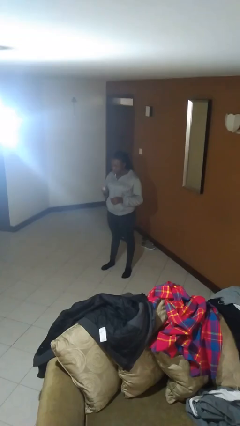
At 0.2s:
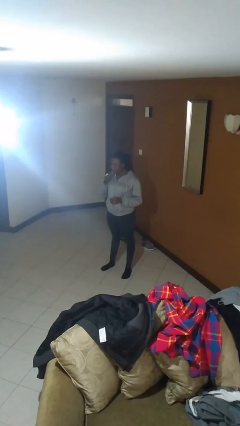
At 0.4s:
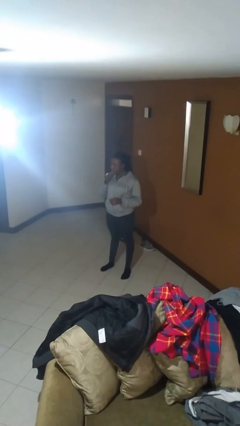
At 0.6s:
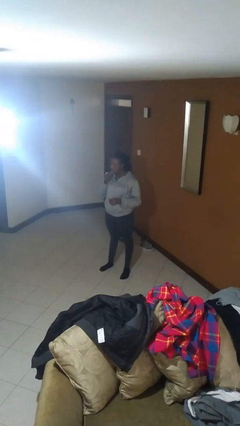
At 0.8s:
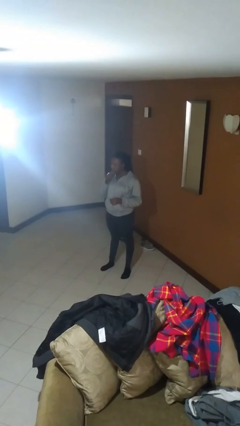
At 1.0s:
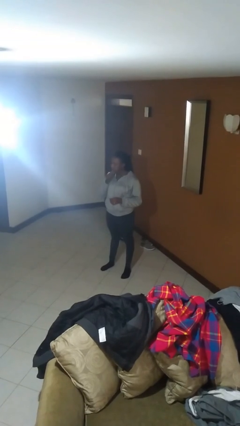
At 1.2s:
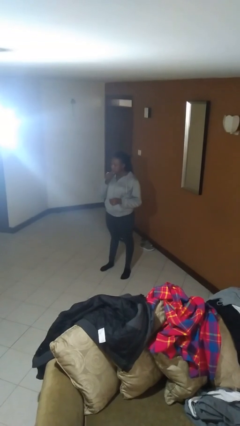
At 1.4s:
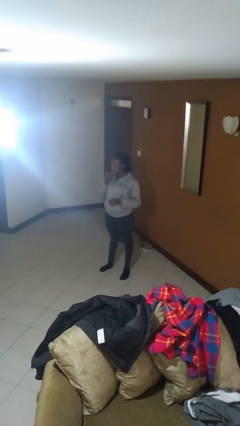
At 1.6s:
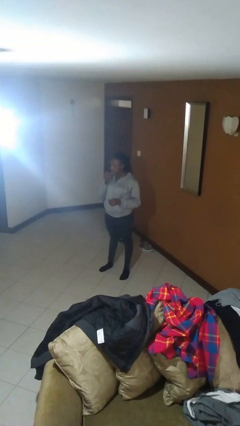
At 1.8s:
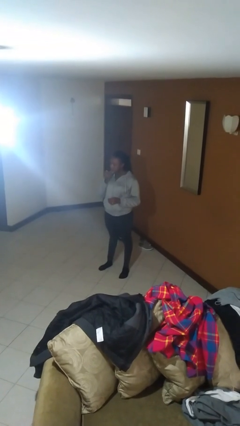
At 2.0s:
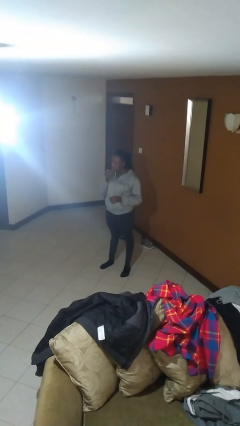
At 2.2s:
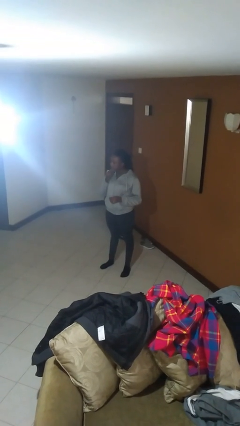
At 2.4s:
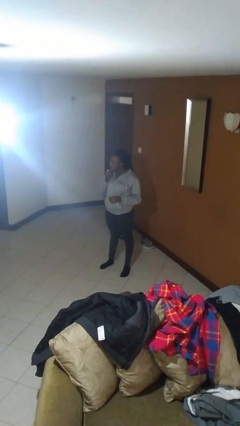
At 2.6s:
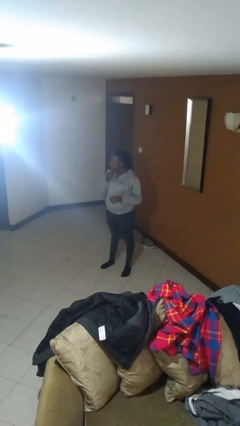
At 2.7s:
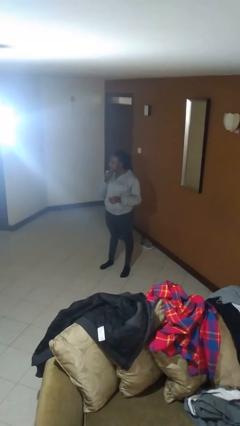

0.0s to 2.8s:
person applies lip makeup

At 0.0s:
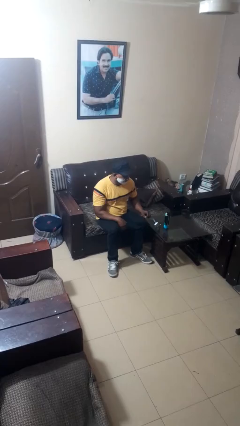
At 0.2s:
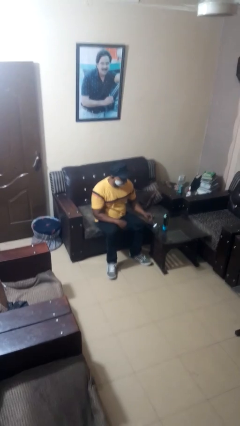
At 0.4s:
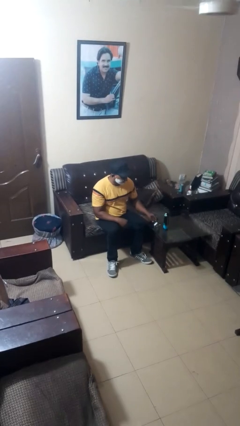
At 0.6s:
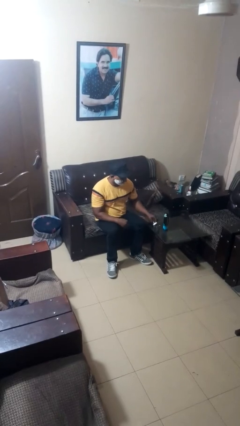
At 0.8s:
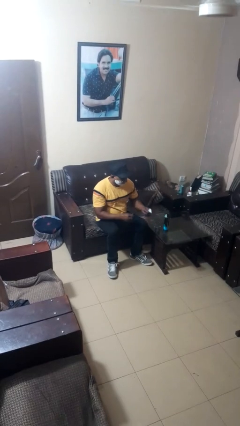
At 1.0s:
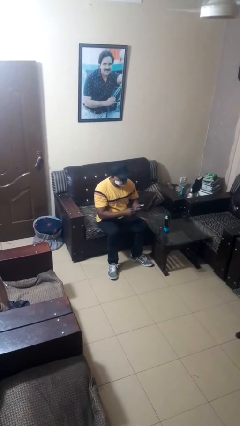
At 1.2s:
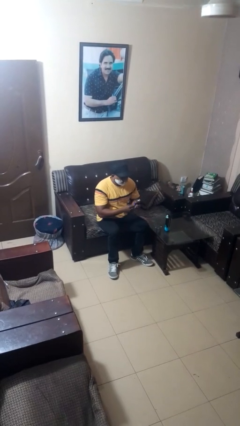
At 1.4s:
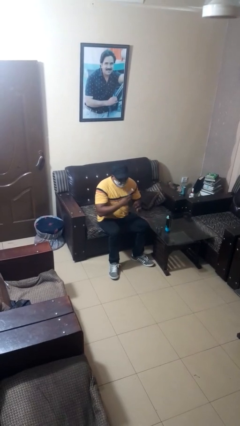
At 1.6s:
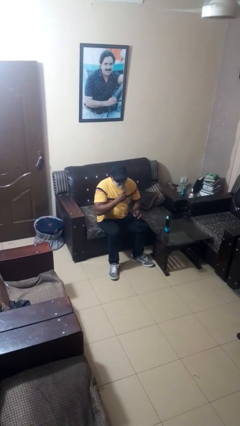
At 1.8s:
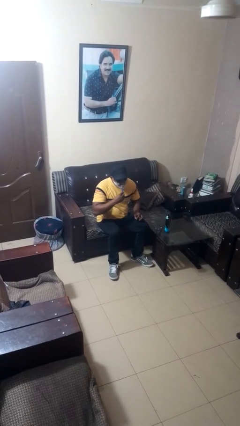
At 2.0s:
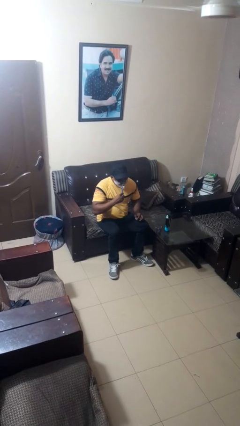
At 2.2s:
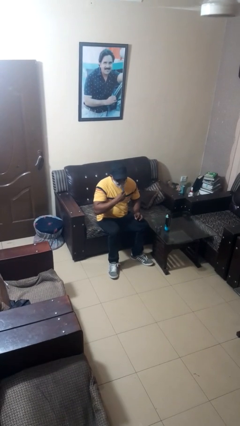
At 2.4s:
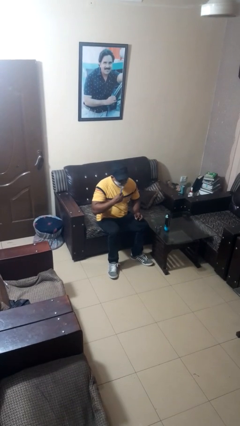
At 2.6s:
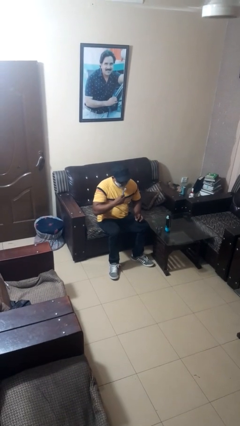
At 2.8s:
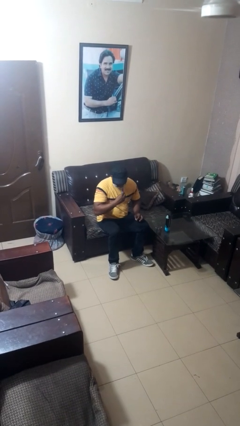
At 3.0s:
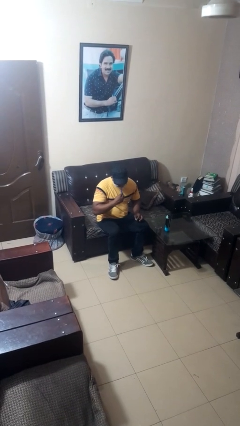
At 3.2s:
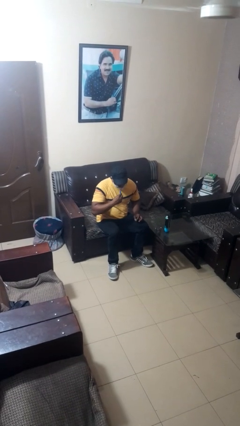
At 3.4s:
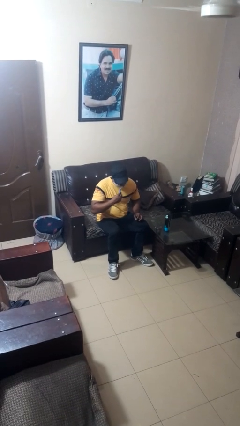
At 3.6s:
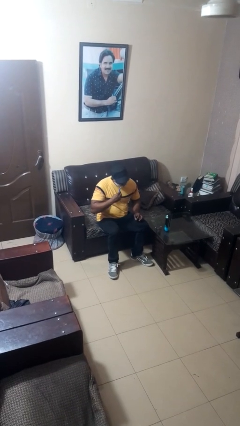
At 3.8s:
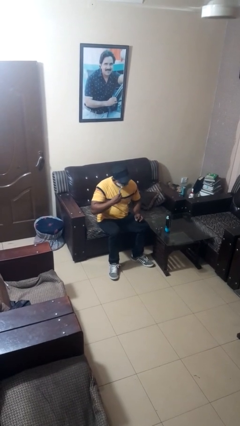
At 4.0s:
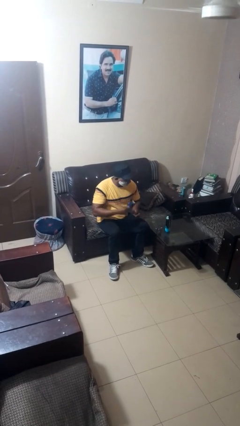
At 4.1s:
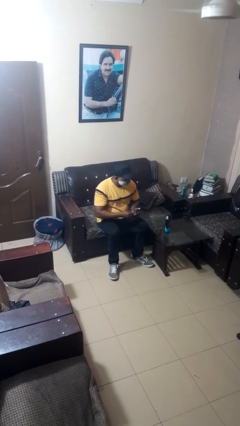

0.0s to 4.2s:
person shaves face

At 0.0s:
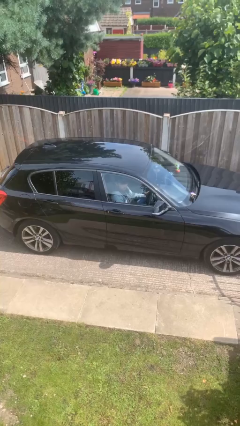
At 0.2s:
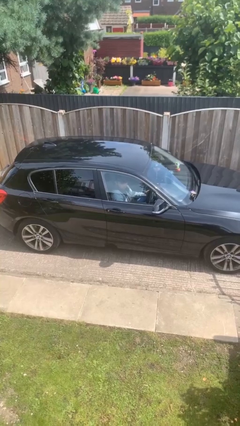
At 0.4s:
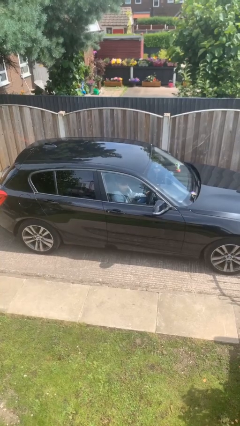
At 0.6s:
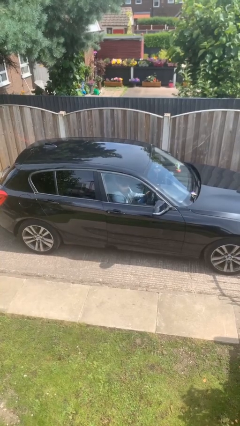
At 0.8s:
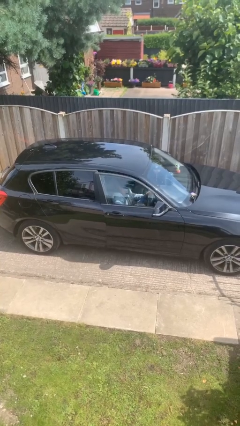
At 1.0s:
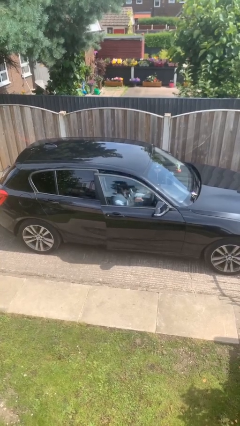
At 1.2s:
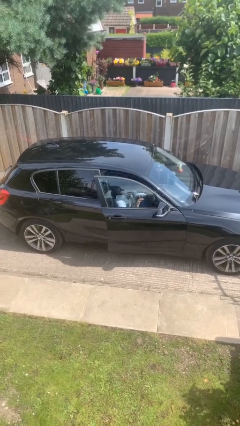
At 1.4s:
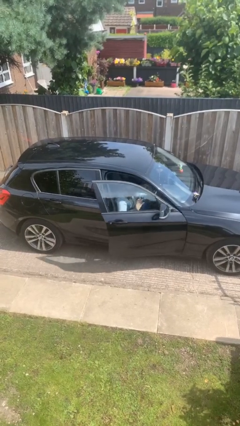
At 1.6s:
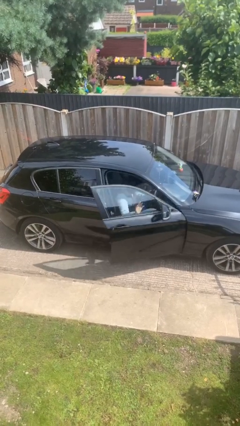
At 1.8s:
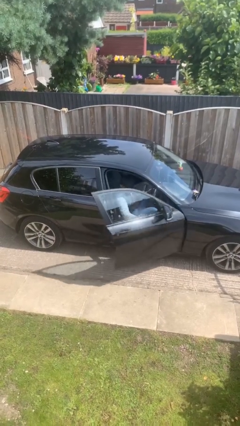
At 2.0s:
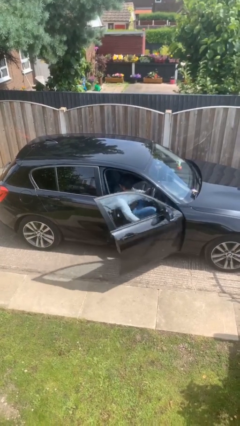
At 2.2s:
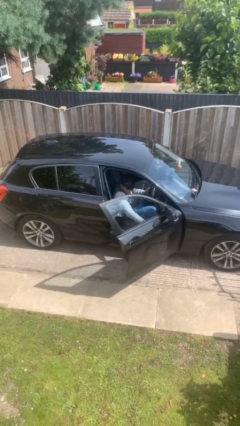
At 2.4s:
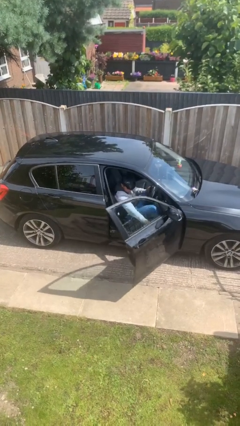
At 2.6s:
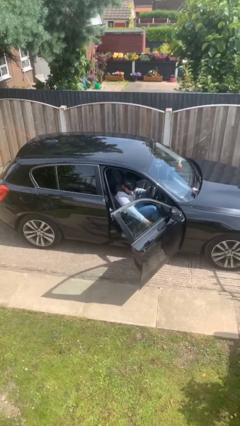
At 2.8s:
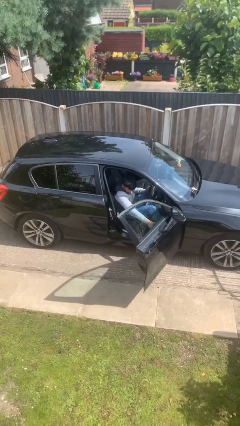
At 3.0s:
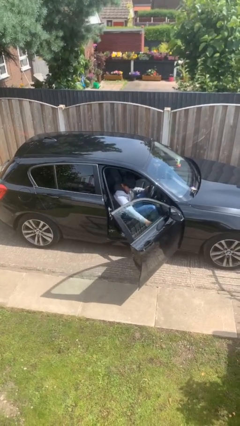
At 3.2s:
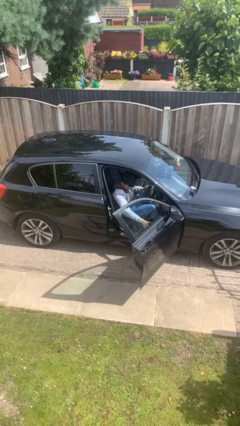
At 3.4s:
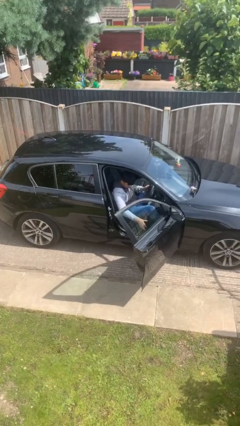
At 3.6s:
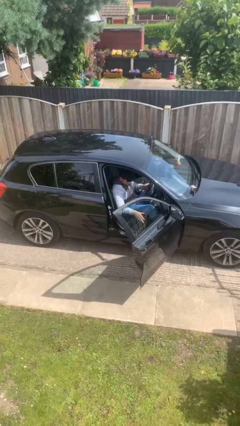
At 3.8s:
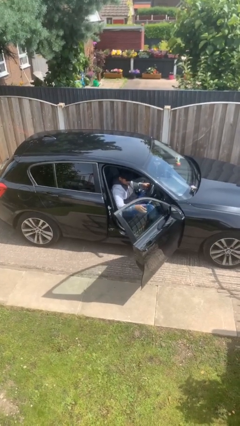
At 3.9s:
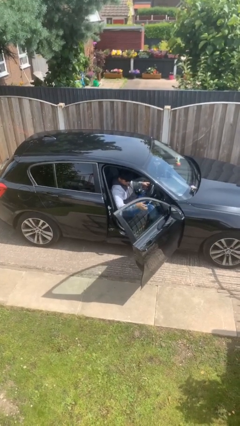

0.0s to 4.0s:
person opens car door

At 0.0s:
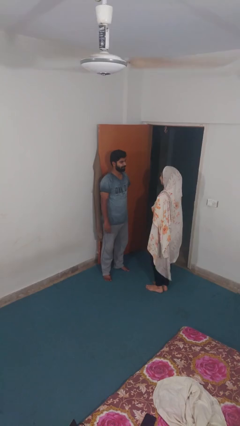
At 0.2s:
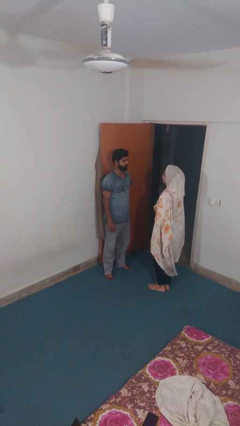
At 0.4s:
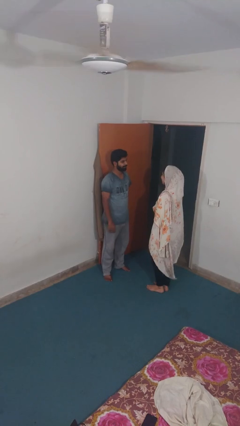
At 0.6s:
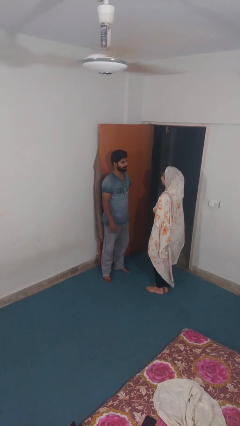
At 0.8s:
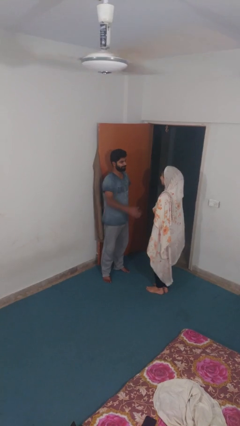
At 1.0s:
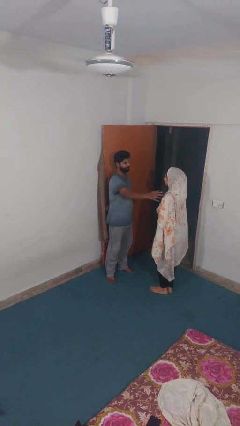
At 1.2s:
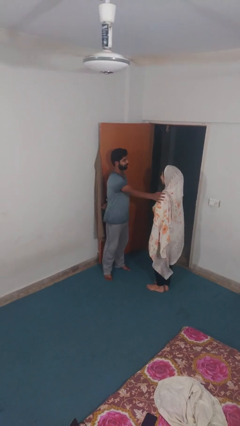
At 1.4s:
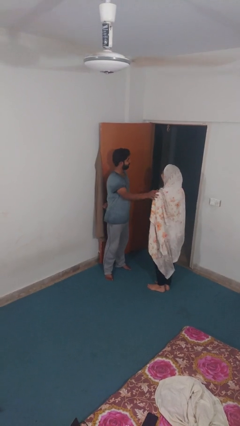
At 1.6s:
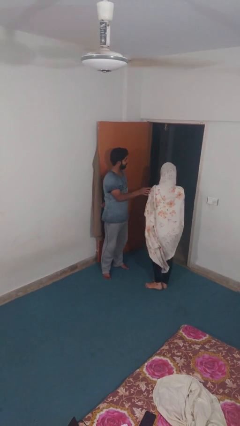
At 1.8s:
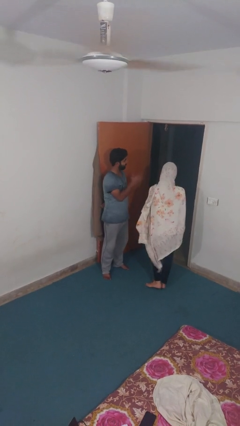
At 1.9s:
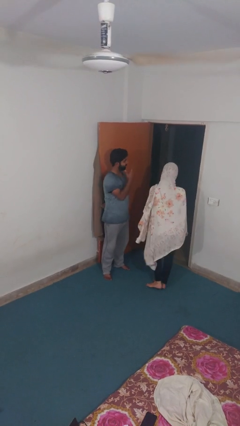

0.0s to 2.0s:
person shoves person

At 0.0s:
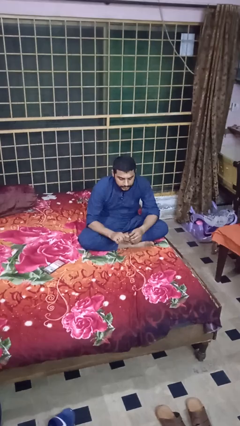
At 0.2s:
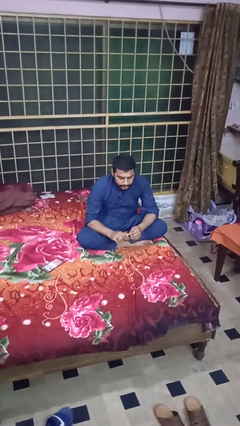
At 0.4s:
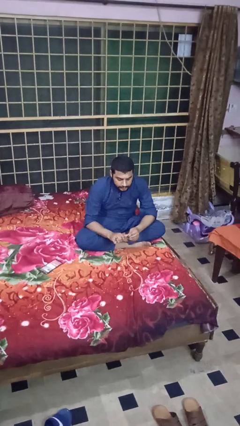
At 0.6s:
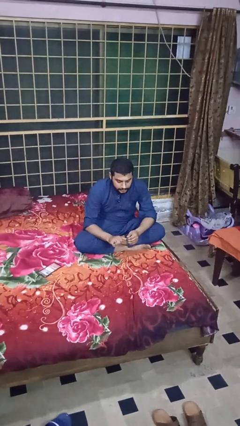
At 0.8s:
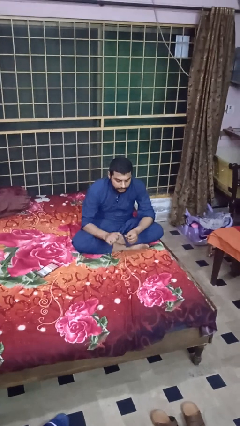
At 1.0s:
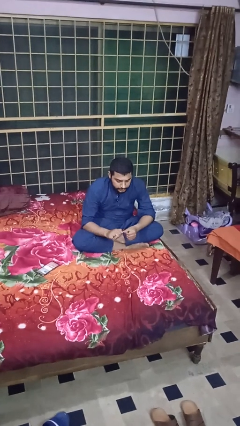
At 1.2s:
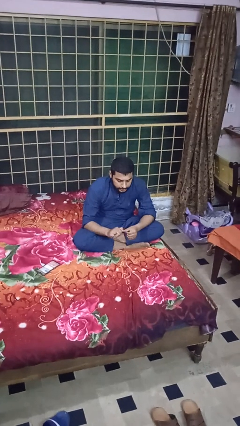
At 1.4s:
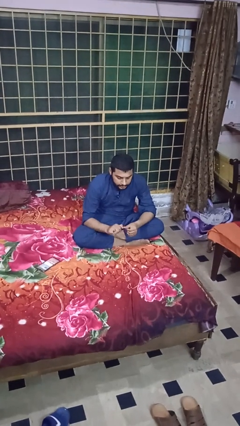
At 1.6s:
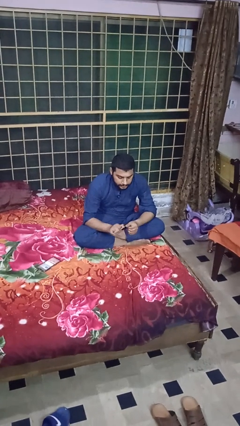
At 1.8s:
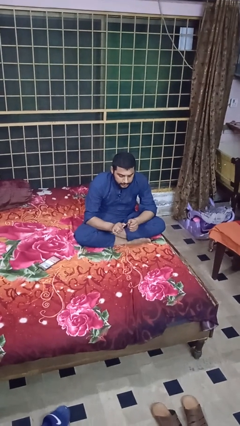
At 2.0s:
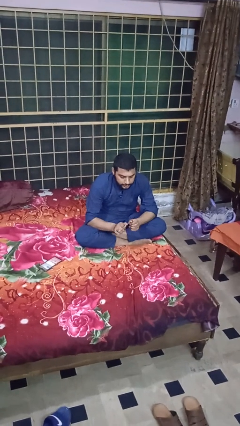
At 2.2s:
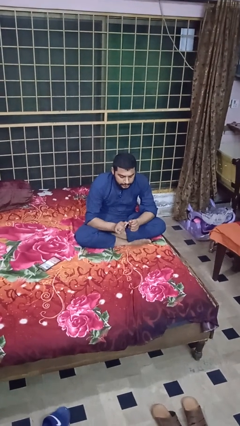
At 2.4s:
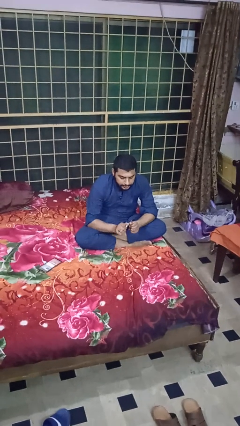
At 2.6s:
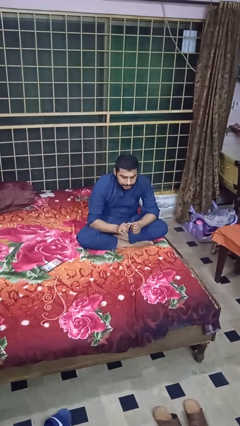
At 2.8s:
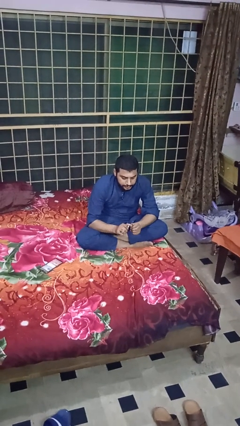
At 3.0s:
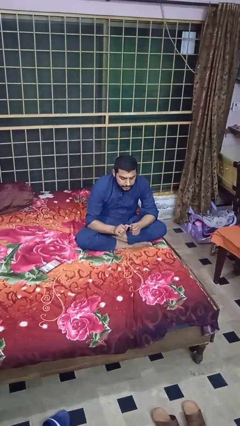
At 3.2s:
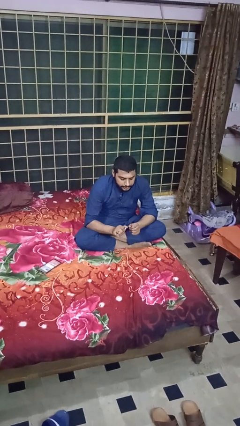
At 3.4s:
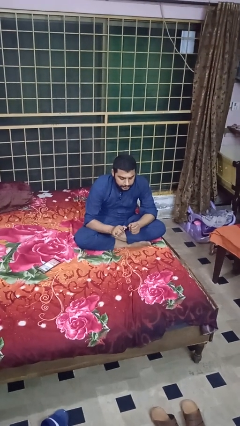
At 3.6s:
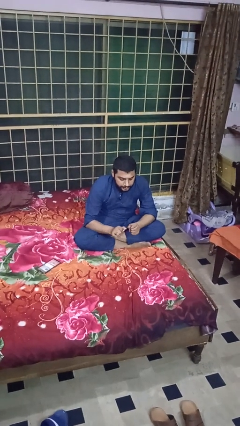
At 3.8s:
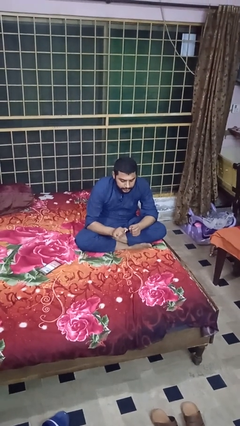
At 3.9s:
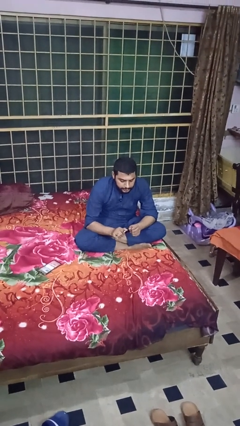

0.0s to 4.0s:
person files fingernails

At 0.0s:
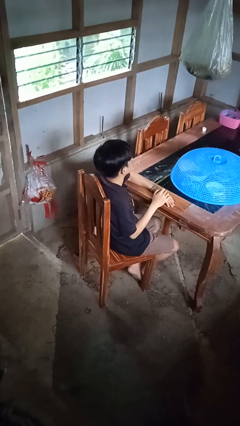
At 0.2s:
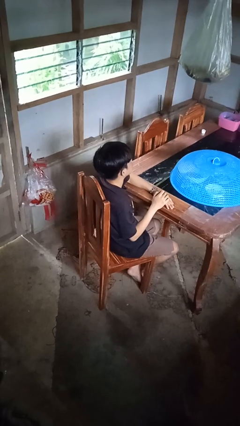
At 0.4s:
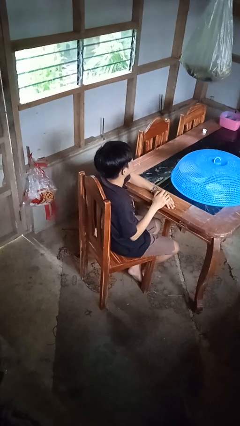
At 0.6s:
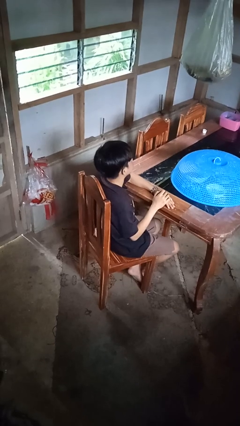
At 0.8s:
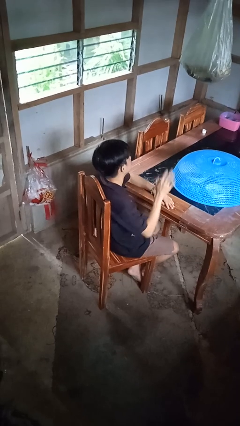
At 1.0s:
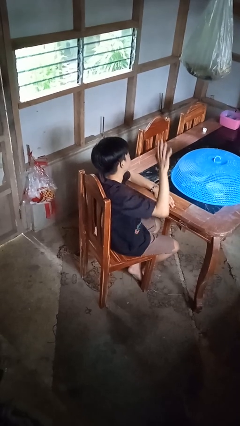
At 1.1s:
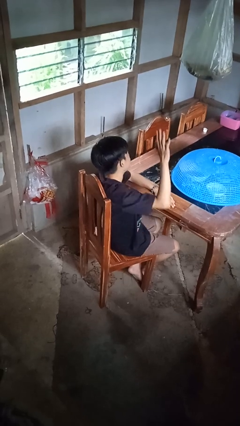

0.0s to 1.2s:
person gestures raise hand
